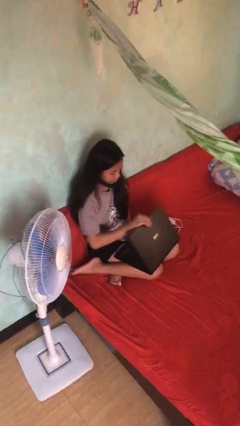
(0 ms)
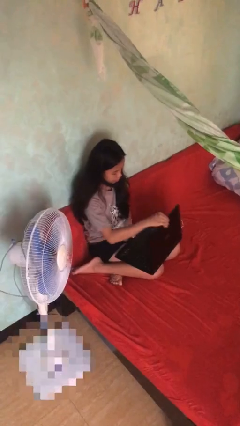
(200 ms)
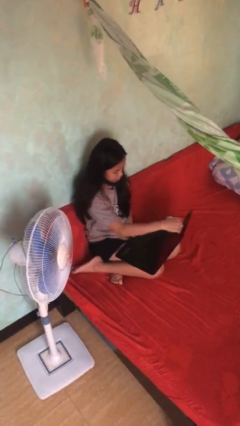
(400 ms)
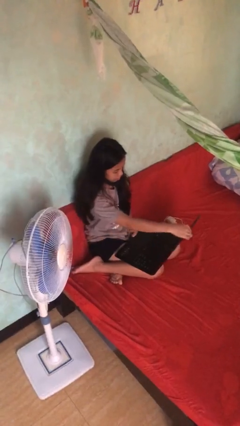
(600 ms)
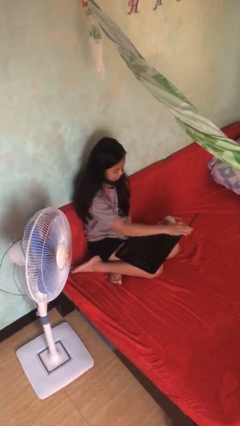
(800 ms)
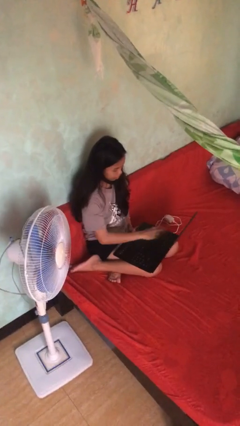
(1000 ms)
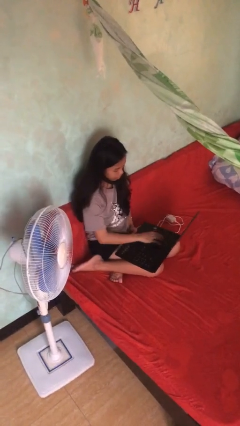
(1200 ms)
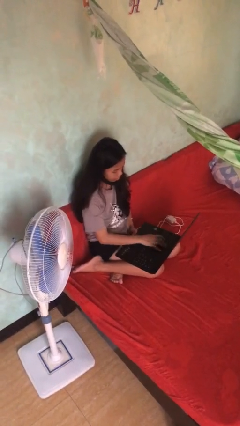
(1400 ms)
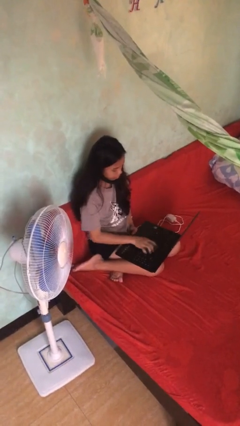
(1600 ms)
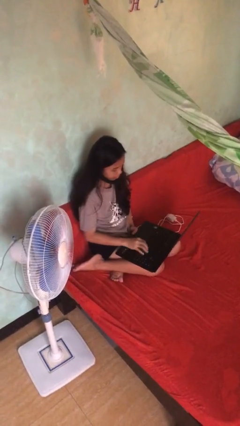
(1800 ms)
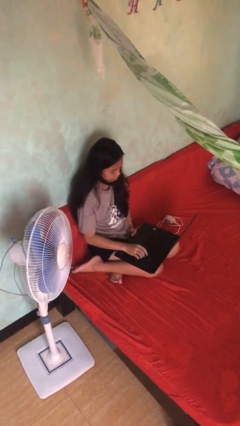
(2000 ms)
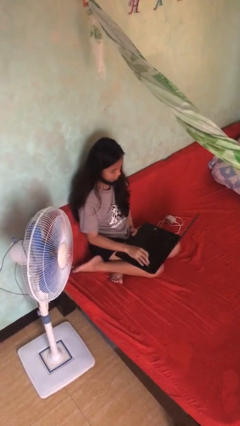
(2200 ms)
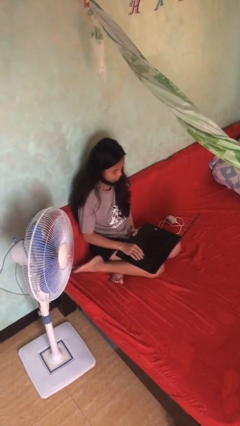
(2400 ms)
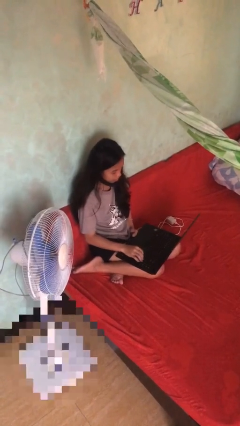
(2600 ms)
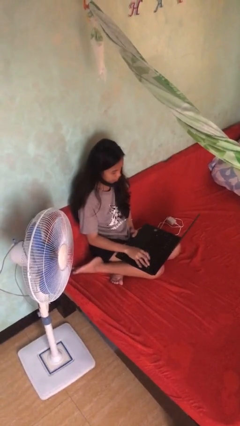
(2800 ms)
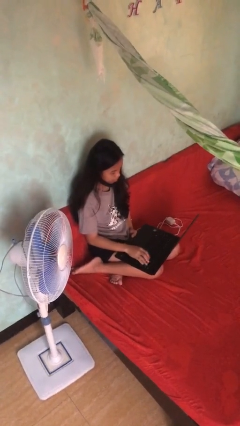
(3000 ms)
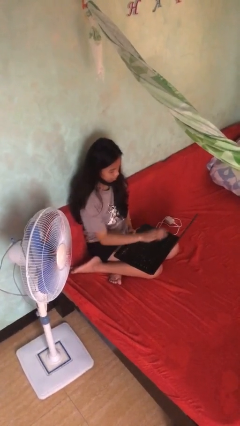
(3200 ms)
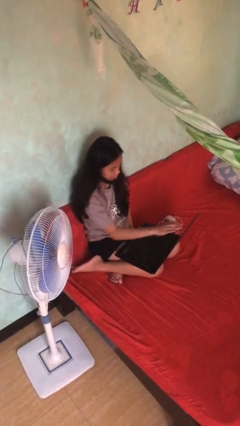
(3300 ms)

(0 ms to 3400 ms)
person interacts with laptop

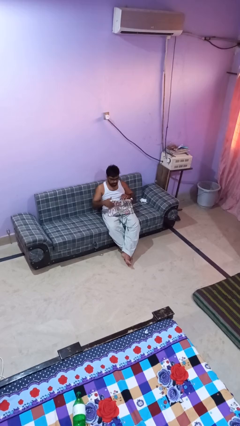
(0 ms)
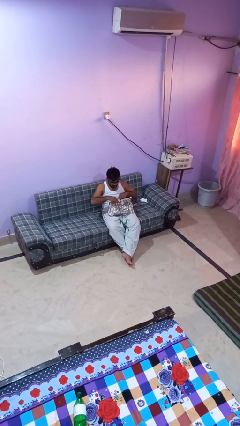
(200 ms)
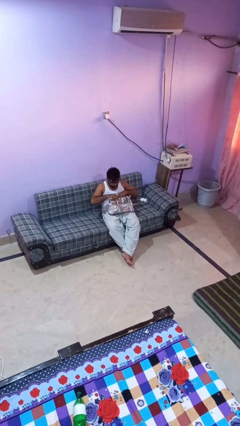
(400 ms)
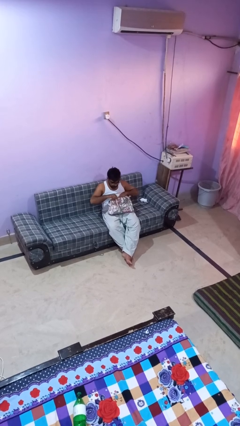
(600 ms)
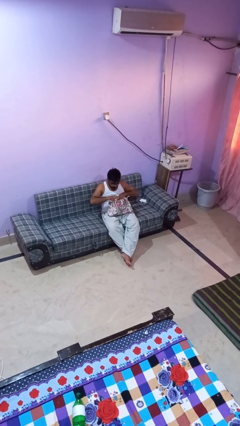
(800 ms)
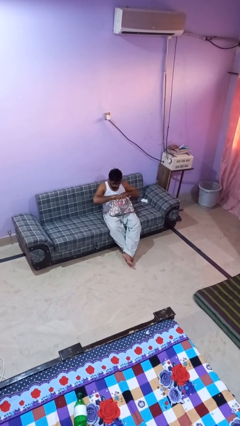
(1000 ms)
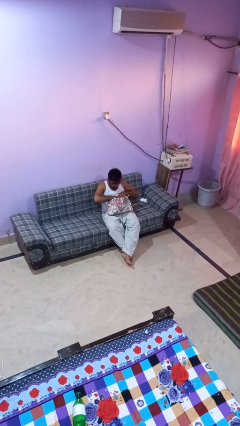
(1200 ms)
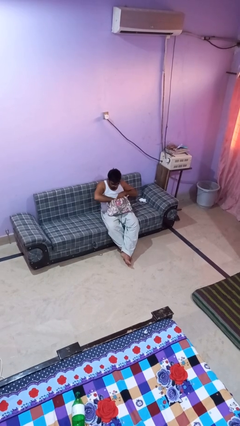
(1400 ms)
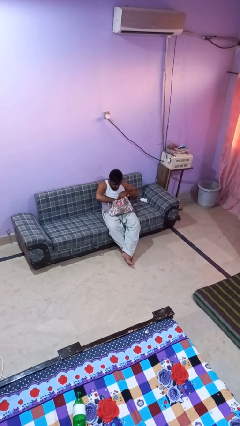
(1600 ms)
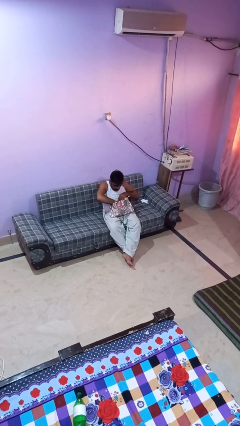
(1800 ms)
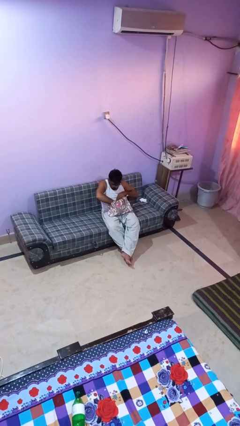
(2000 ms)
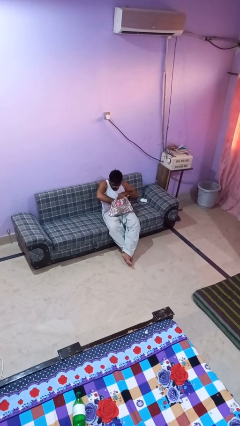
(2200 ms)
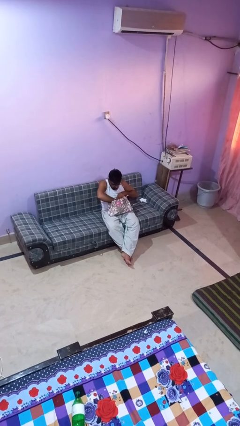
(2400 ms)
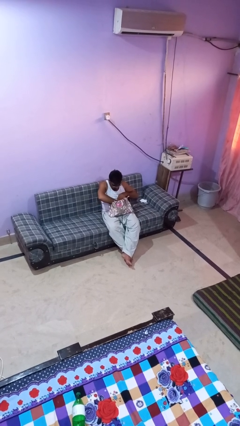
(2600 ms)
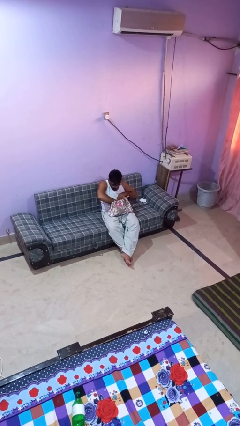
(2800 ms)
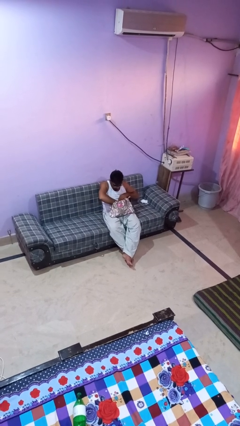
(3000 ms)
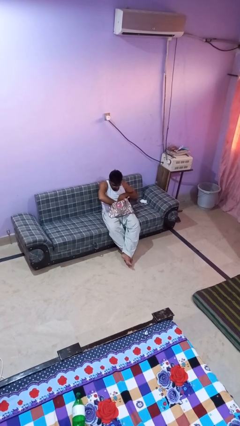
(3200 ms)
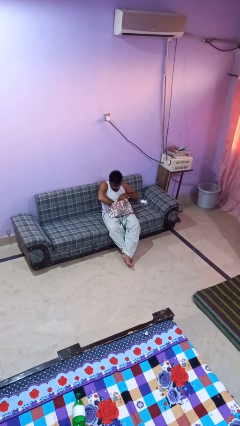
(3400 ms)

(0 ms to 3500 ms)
person searches in purse

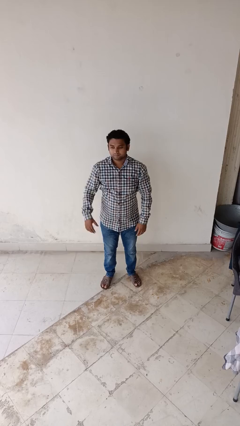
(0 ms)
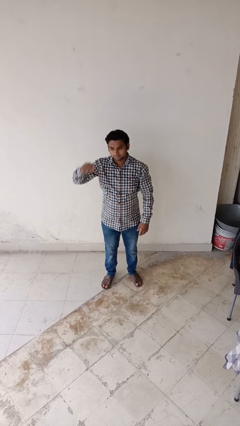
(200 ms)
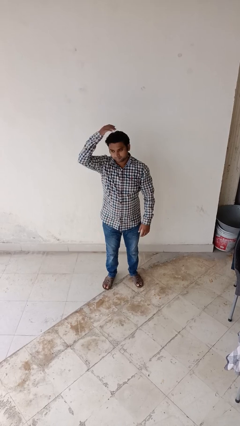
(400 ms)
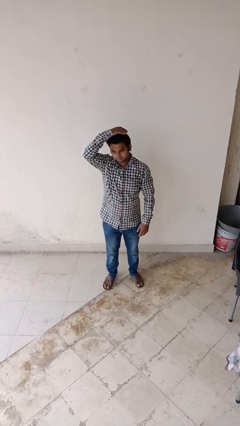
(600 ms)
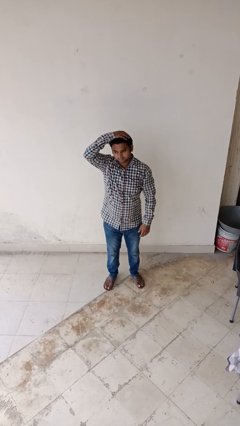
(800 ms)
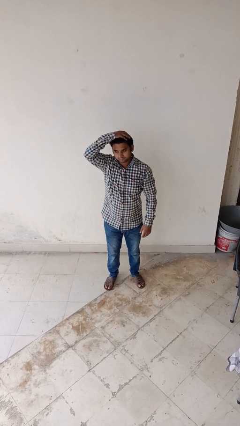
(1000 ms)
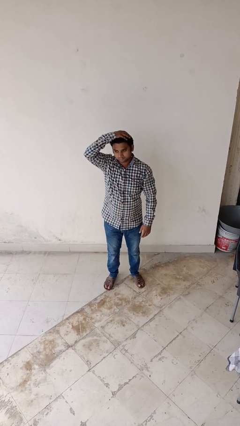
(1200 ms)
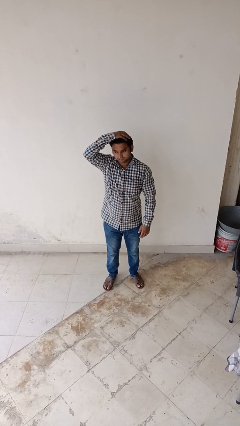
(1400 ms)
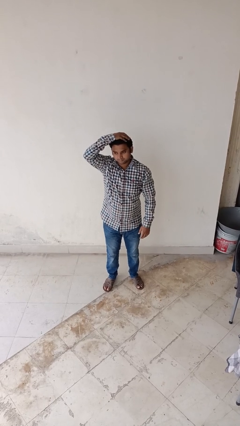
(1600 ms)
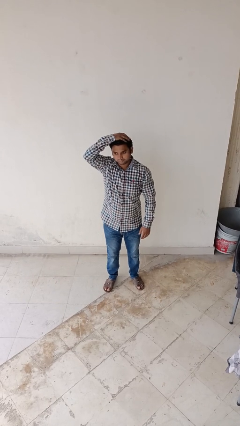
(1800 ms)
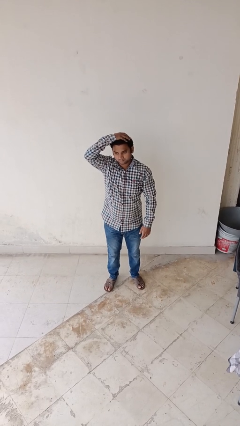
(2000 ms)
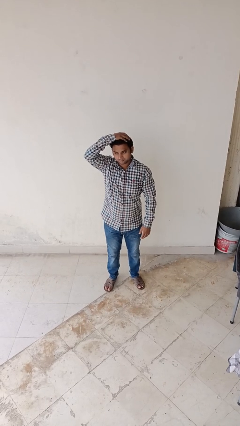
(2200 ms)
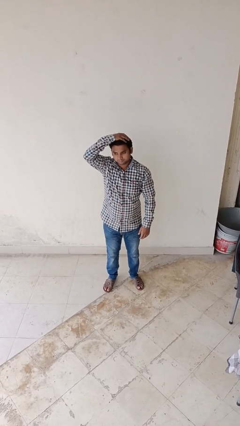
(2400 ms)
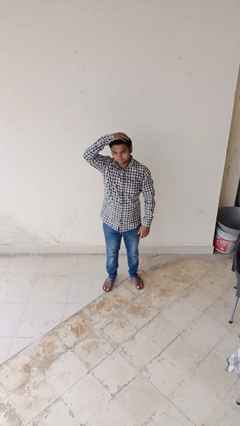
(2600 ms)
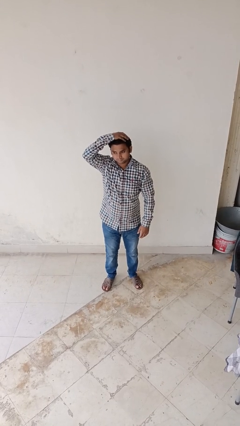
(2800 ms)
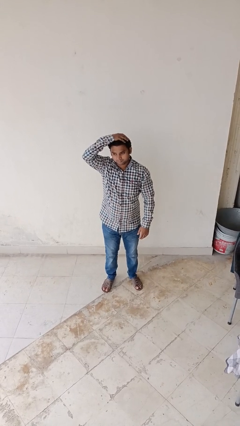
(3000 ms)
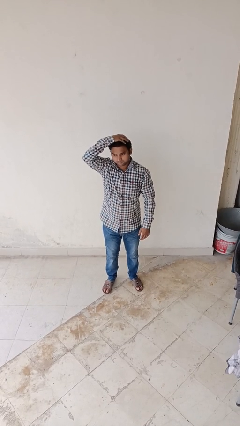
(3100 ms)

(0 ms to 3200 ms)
person pats head

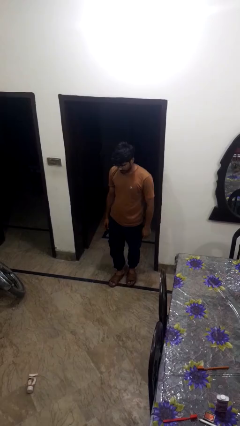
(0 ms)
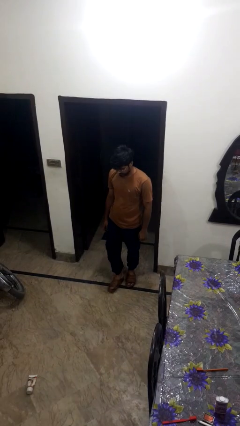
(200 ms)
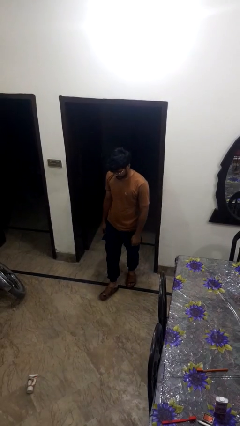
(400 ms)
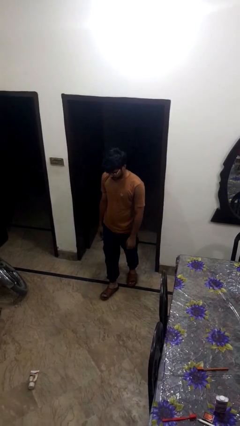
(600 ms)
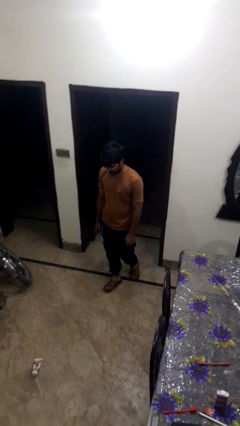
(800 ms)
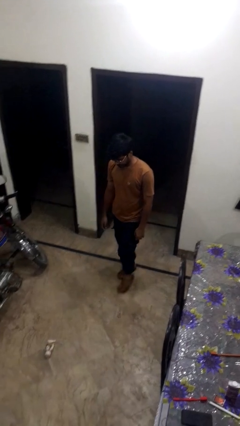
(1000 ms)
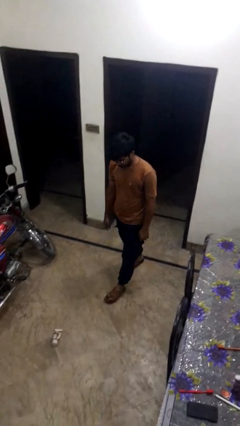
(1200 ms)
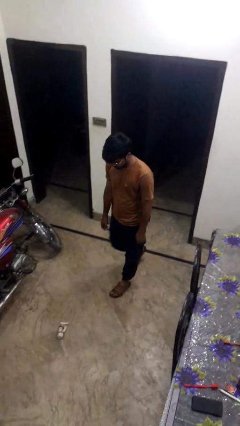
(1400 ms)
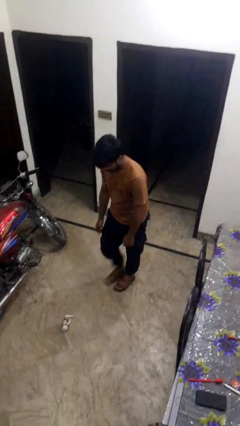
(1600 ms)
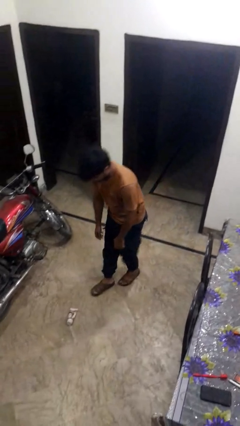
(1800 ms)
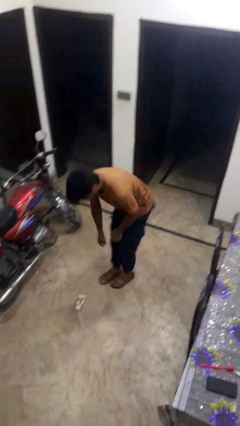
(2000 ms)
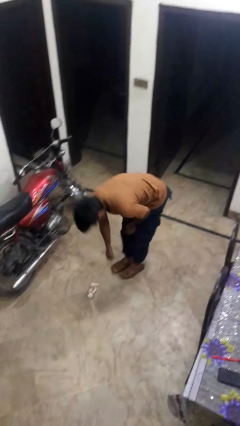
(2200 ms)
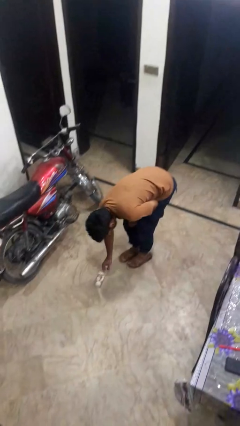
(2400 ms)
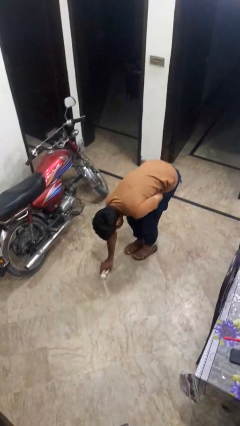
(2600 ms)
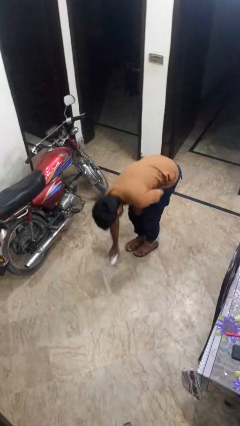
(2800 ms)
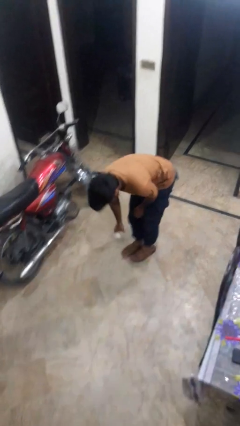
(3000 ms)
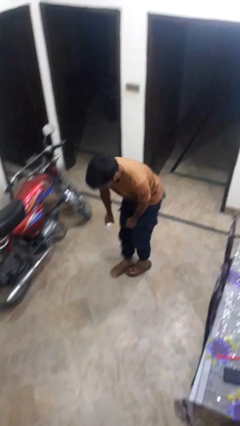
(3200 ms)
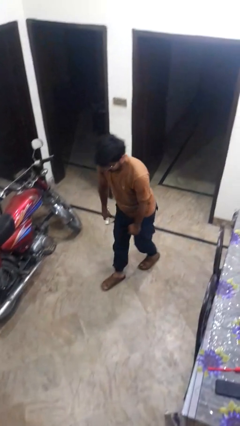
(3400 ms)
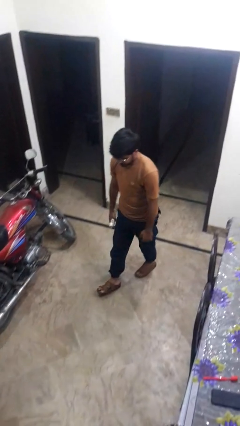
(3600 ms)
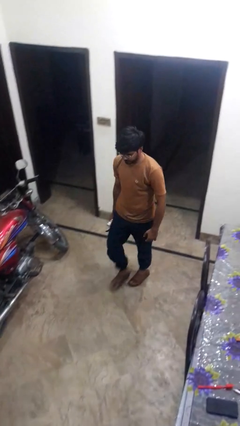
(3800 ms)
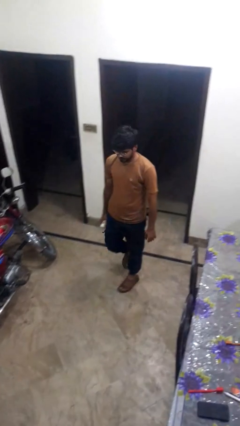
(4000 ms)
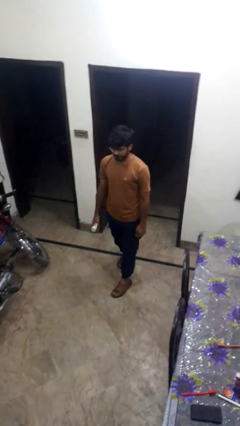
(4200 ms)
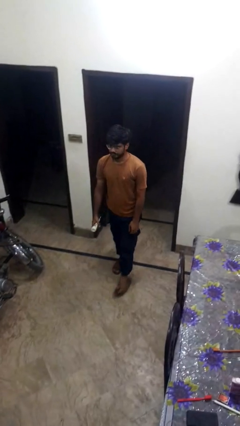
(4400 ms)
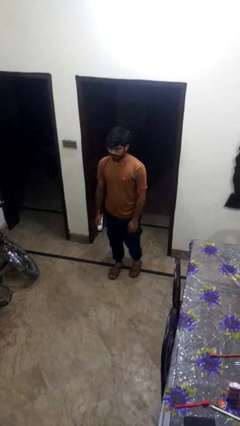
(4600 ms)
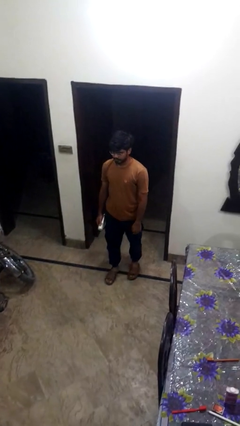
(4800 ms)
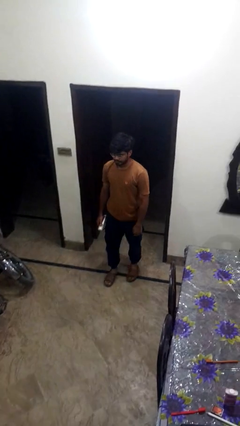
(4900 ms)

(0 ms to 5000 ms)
person picks up object from floor

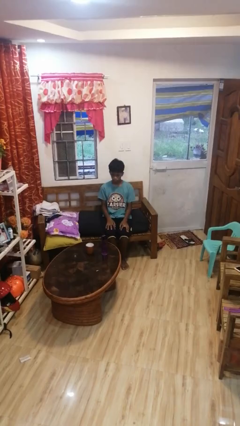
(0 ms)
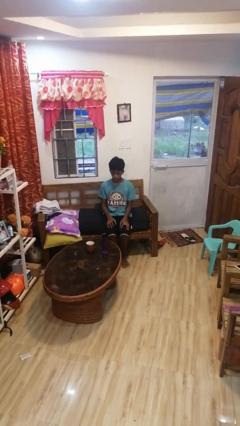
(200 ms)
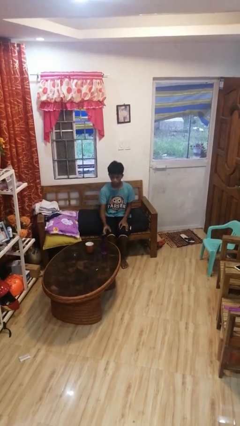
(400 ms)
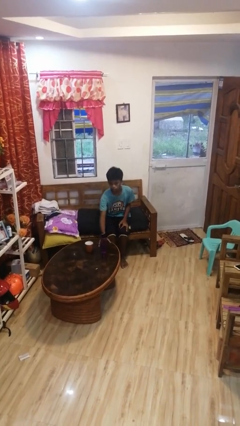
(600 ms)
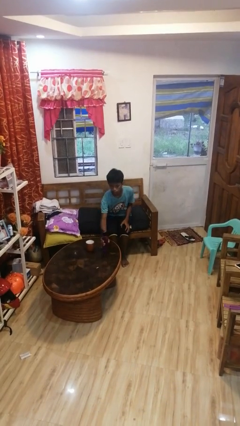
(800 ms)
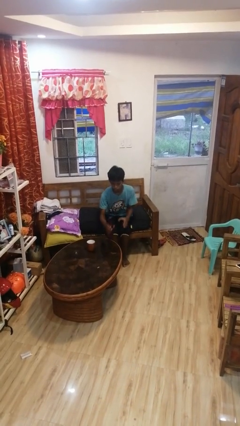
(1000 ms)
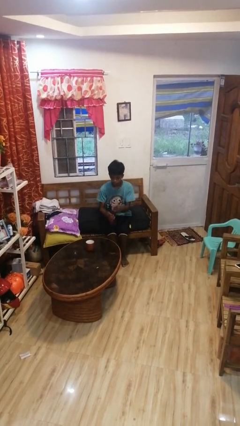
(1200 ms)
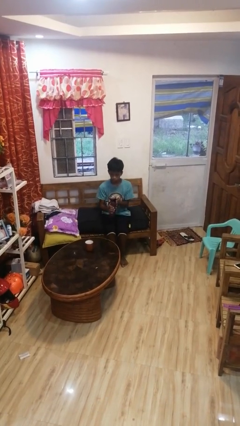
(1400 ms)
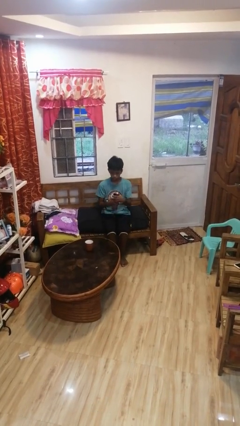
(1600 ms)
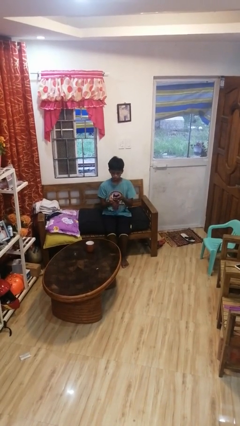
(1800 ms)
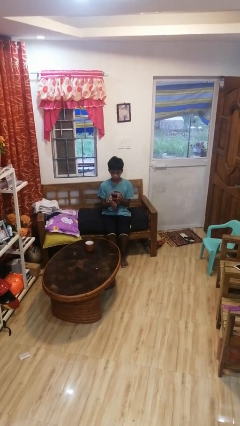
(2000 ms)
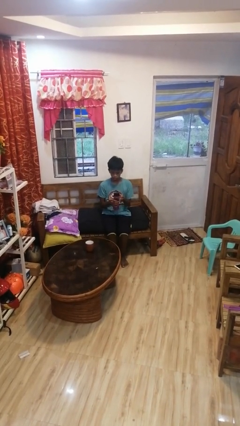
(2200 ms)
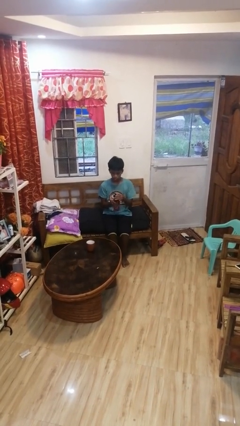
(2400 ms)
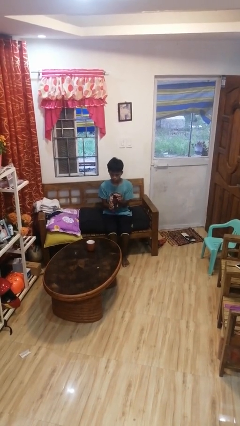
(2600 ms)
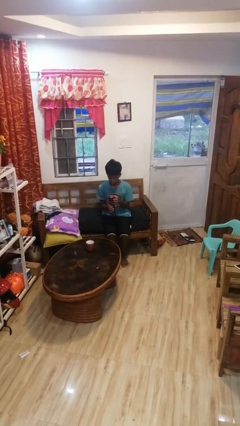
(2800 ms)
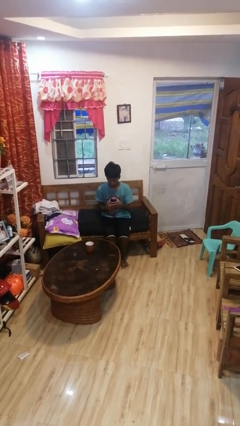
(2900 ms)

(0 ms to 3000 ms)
person unscrews lid from bottle
